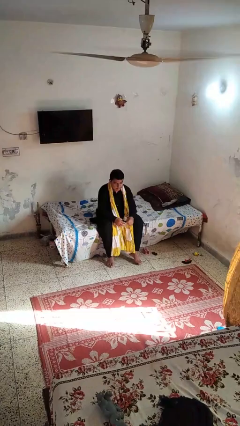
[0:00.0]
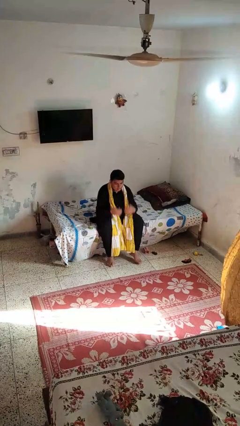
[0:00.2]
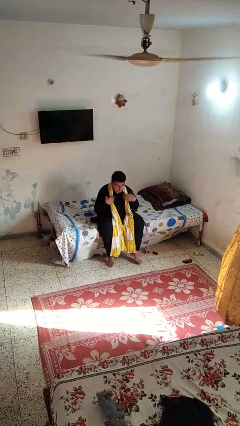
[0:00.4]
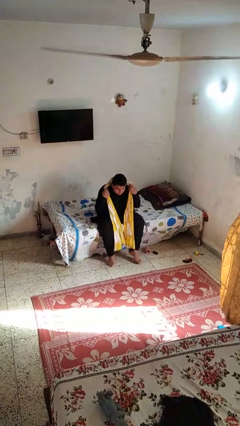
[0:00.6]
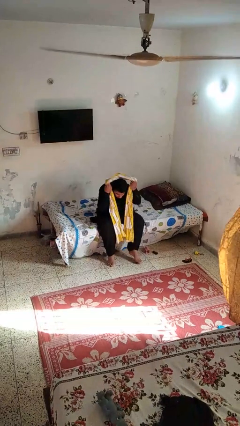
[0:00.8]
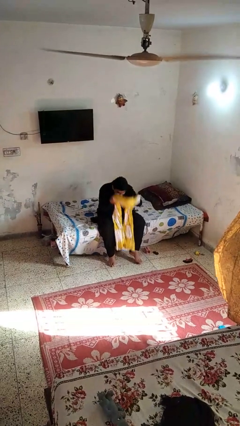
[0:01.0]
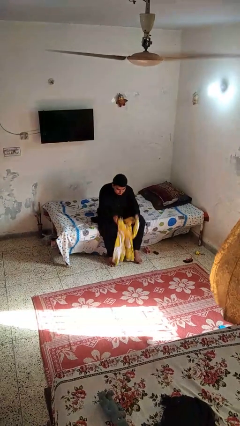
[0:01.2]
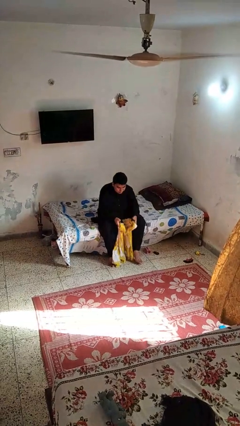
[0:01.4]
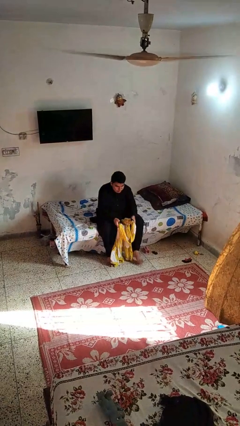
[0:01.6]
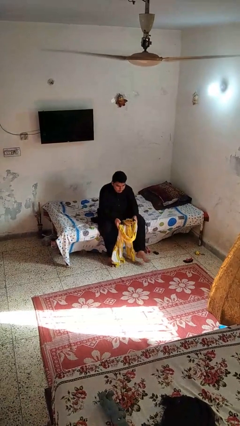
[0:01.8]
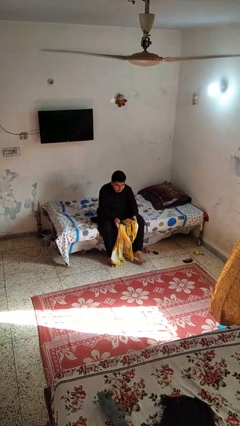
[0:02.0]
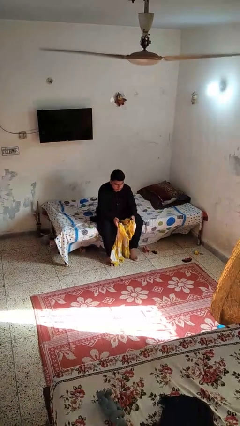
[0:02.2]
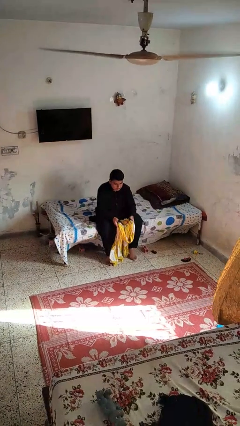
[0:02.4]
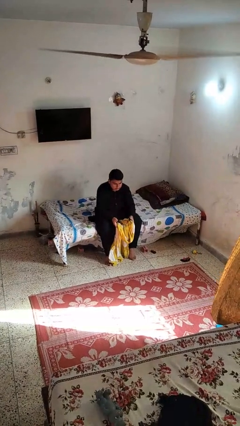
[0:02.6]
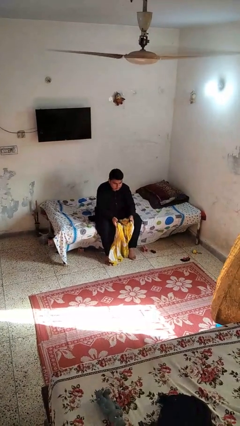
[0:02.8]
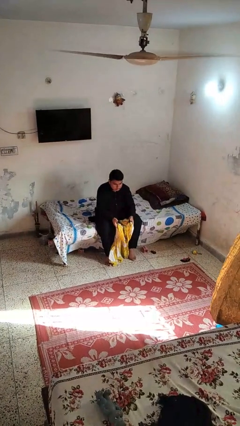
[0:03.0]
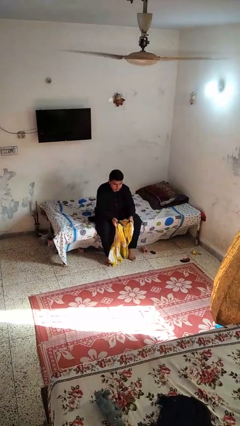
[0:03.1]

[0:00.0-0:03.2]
person takes off scarf

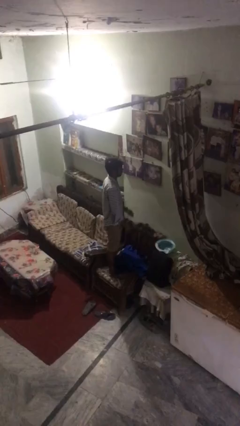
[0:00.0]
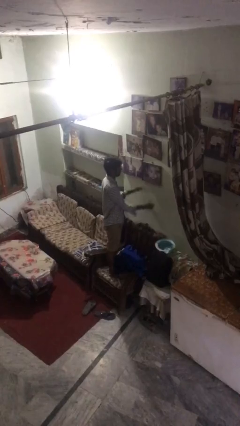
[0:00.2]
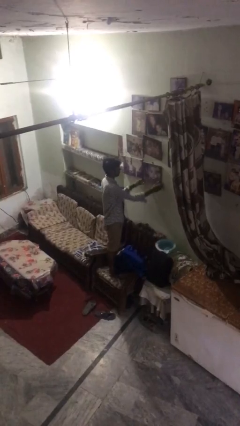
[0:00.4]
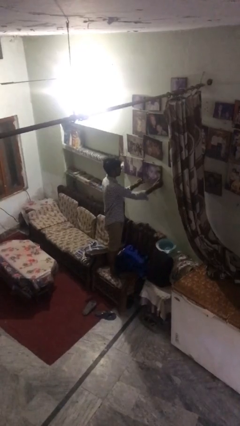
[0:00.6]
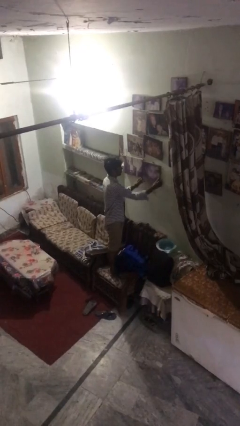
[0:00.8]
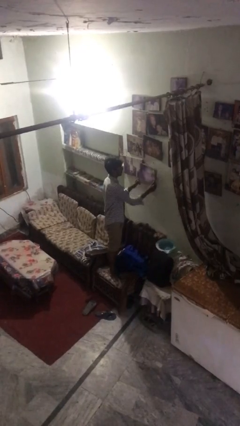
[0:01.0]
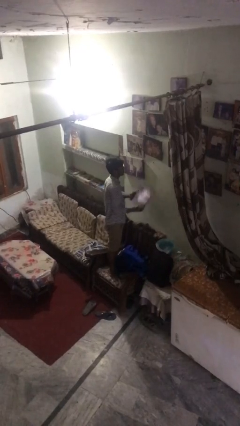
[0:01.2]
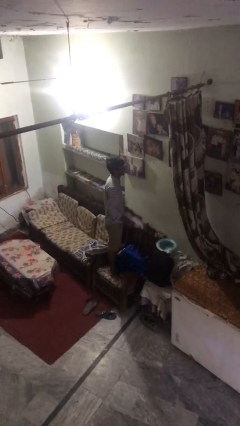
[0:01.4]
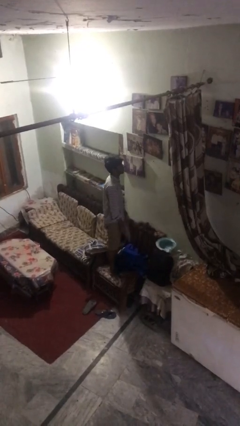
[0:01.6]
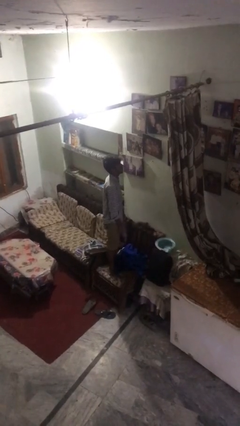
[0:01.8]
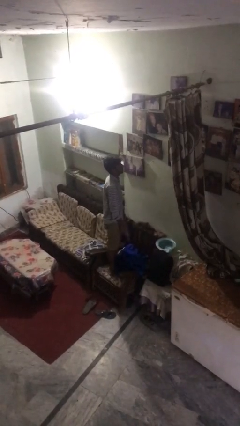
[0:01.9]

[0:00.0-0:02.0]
person takes down picture frame

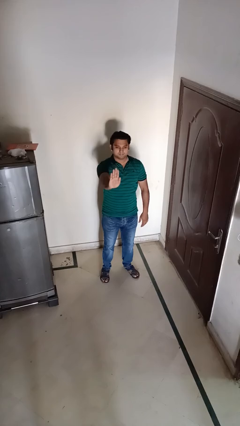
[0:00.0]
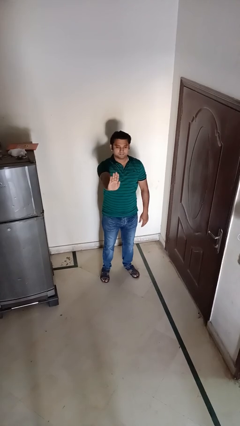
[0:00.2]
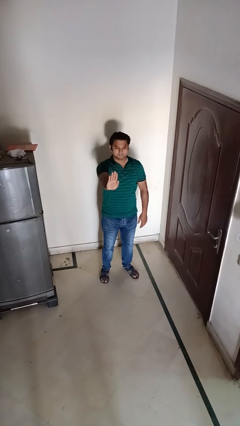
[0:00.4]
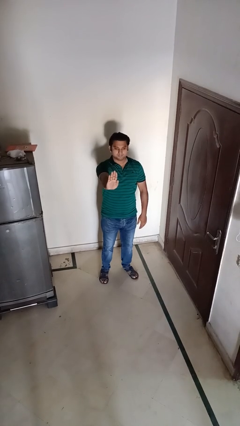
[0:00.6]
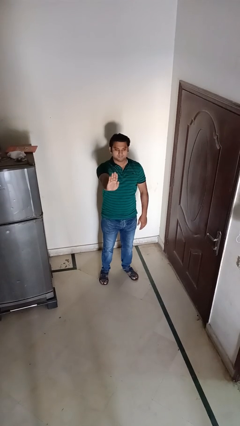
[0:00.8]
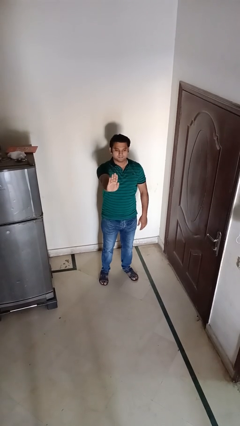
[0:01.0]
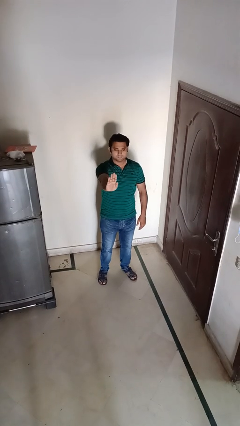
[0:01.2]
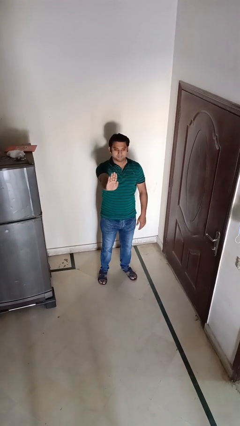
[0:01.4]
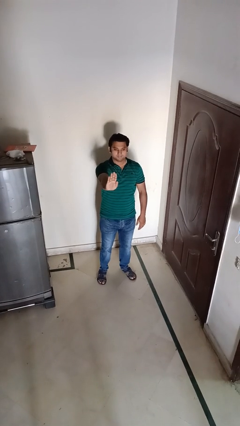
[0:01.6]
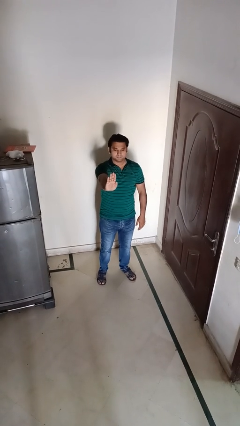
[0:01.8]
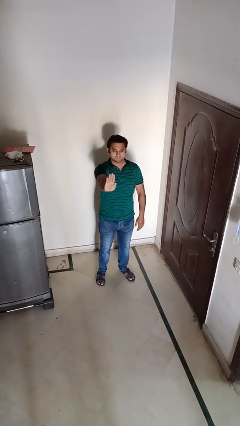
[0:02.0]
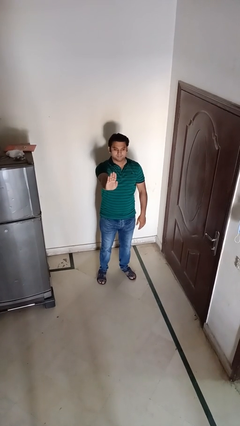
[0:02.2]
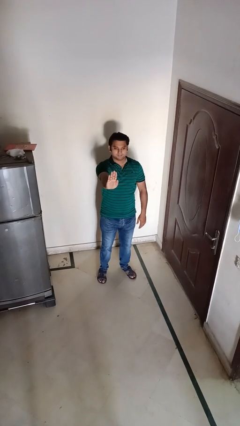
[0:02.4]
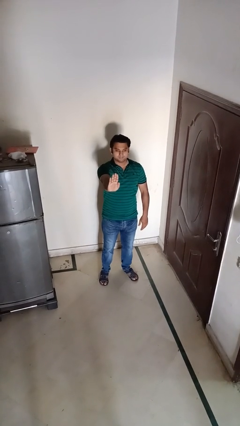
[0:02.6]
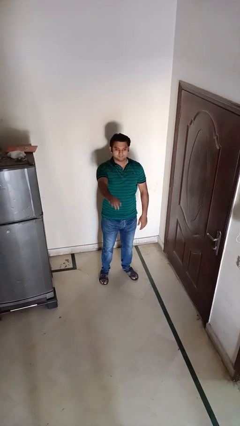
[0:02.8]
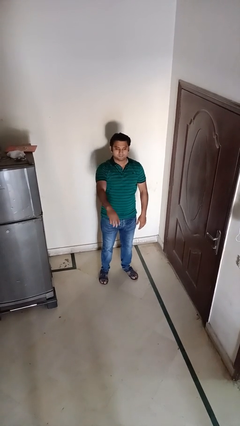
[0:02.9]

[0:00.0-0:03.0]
person gestures stop

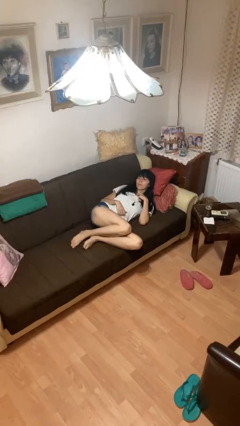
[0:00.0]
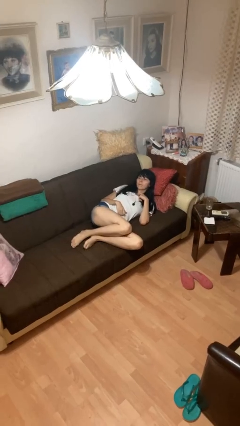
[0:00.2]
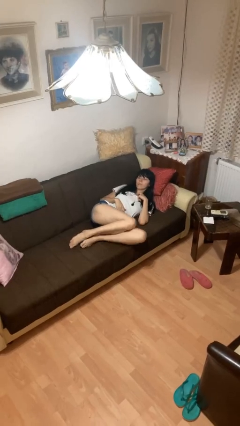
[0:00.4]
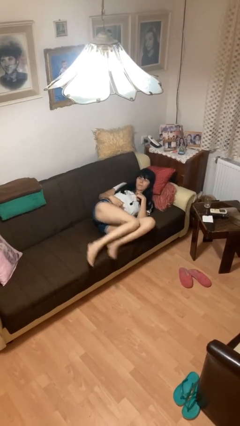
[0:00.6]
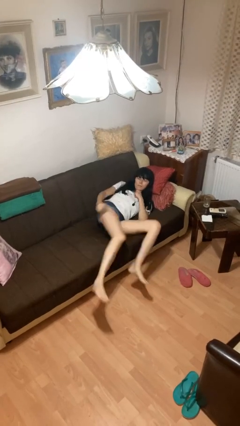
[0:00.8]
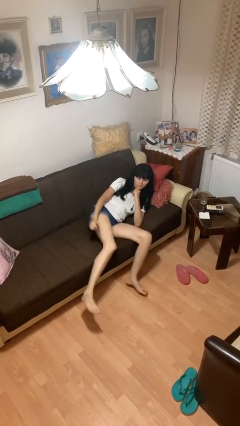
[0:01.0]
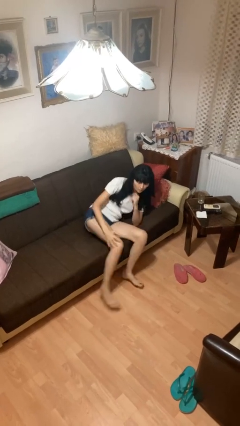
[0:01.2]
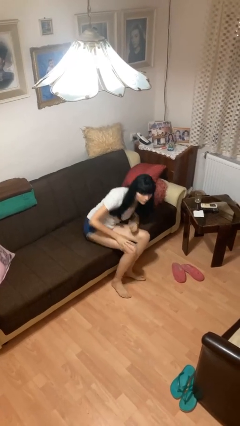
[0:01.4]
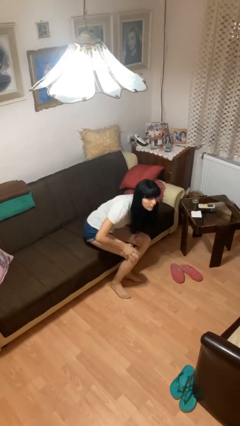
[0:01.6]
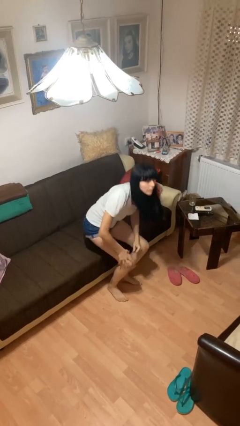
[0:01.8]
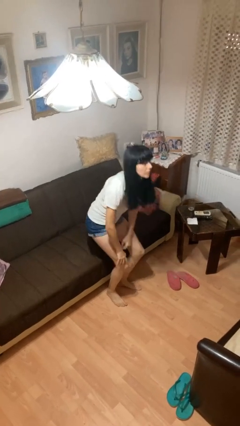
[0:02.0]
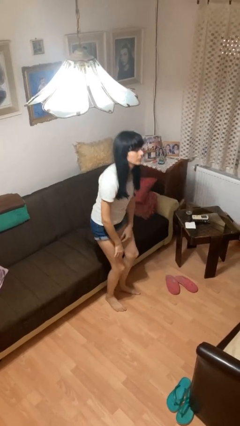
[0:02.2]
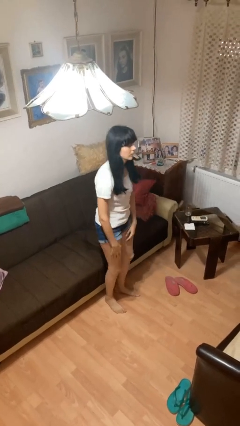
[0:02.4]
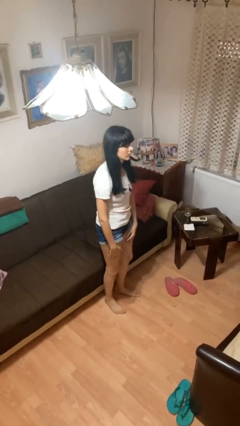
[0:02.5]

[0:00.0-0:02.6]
person stands up

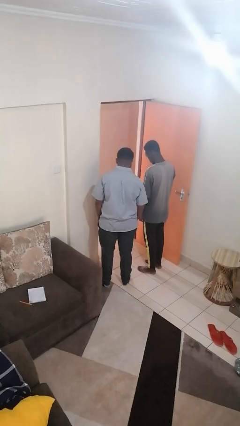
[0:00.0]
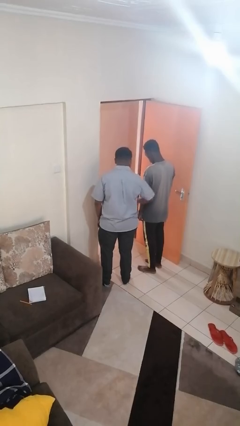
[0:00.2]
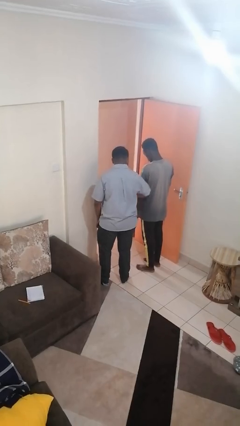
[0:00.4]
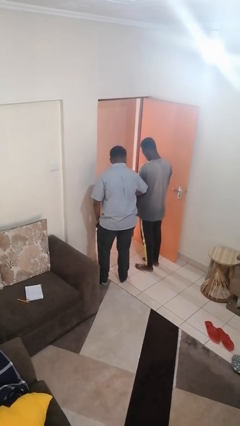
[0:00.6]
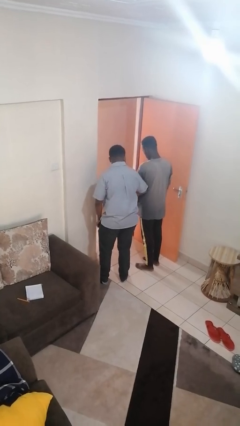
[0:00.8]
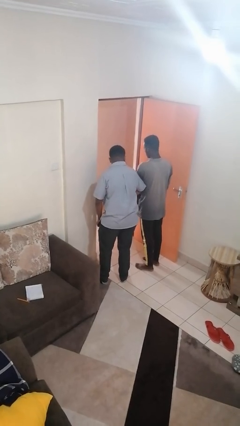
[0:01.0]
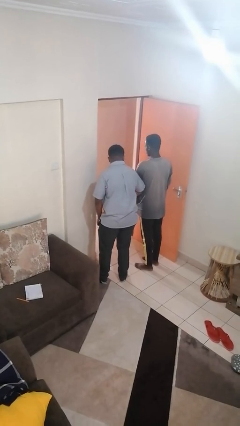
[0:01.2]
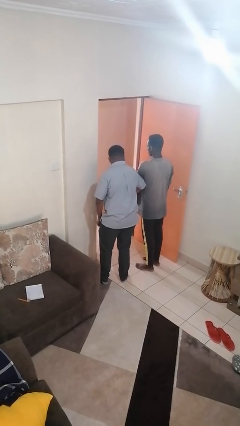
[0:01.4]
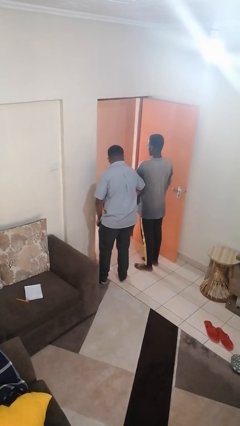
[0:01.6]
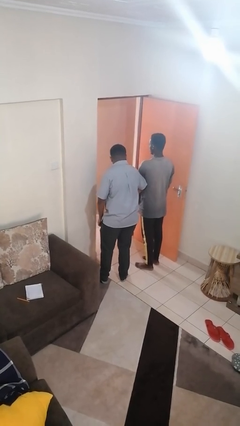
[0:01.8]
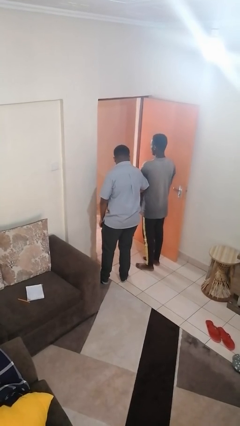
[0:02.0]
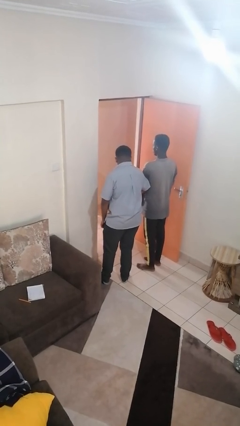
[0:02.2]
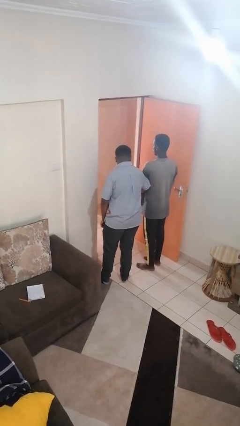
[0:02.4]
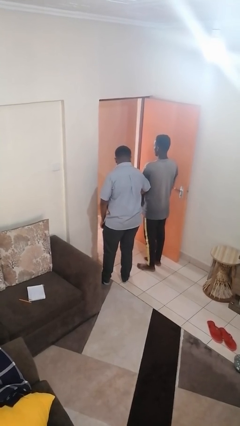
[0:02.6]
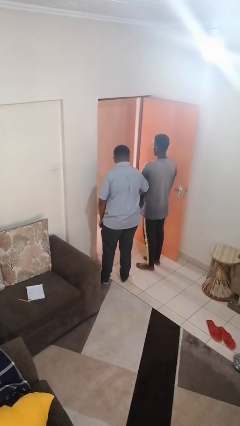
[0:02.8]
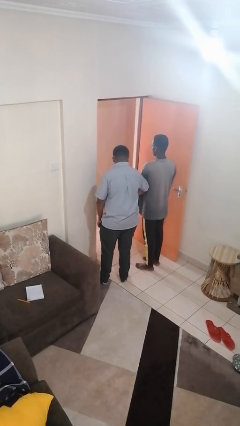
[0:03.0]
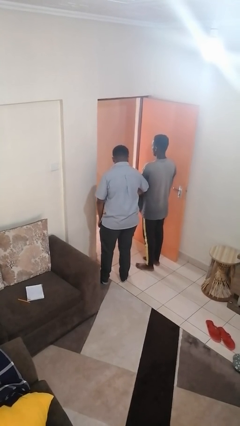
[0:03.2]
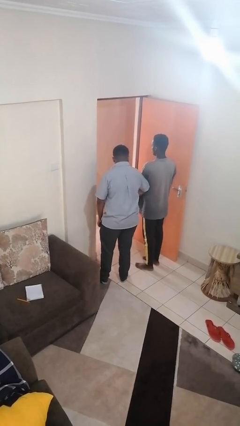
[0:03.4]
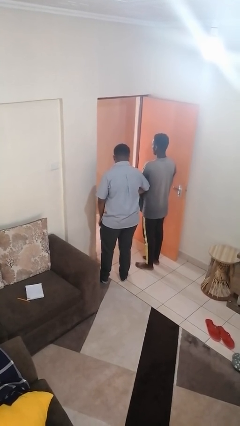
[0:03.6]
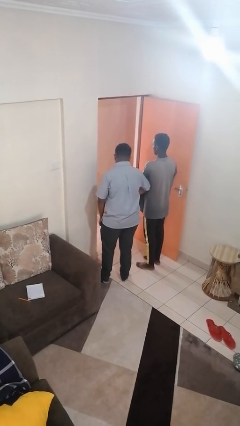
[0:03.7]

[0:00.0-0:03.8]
person nudges person with elbow

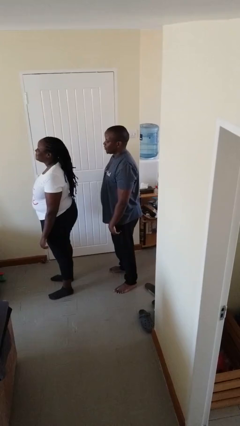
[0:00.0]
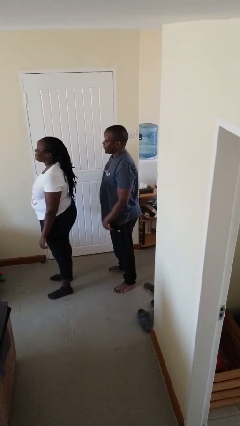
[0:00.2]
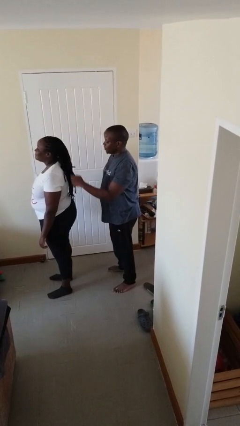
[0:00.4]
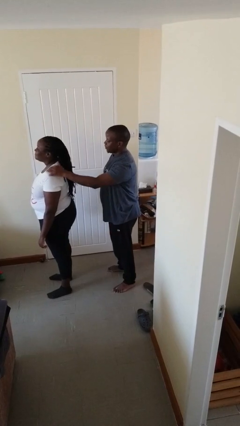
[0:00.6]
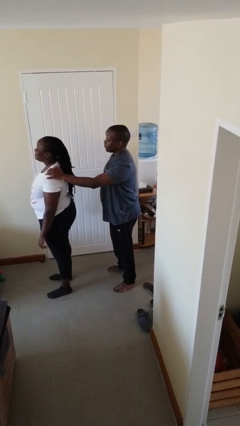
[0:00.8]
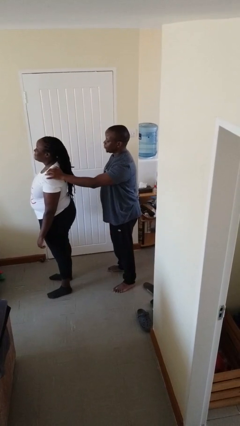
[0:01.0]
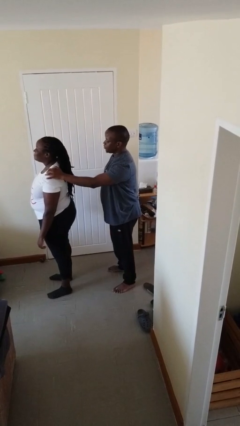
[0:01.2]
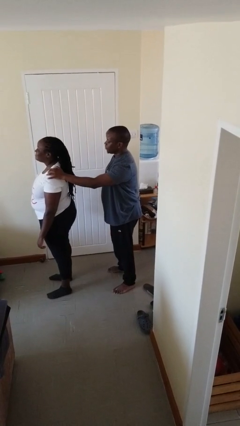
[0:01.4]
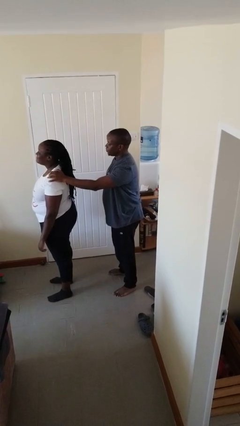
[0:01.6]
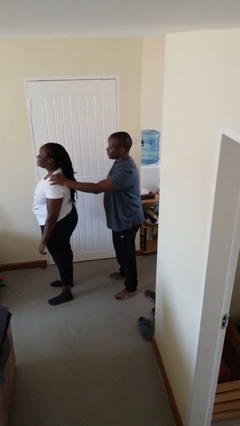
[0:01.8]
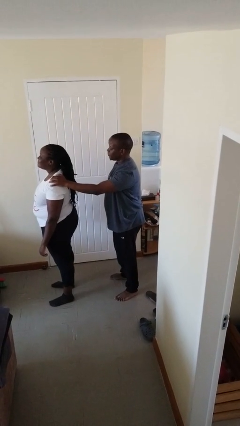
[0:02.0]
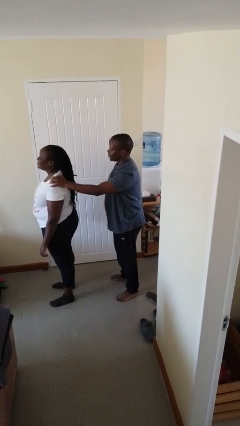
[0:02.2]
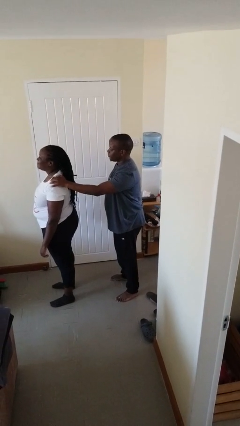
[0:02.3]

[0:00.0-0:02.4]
person grabs person by shoulder
